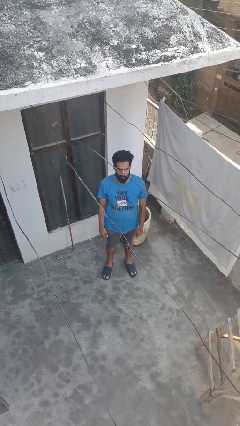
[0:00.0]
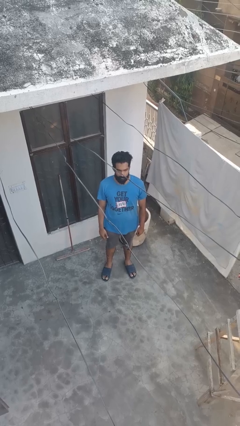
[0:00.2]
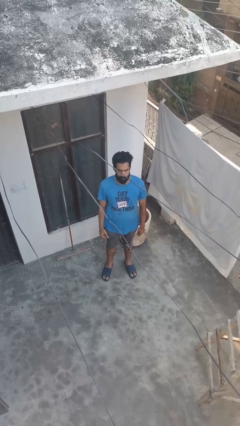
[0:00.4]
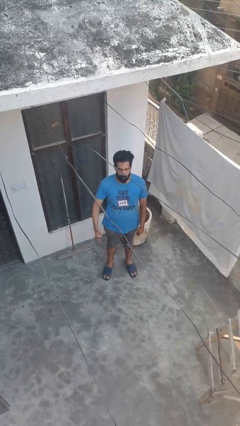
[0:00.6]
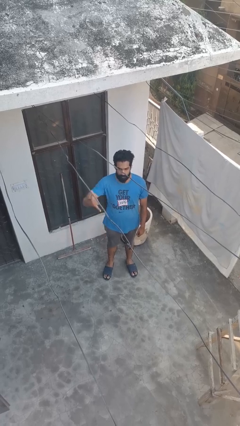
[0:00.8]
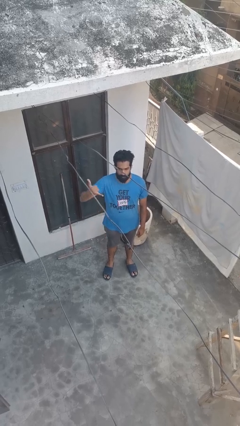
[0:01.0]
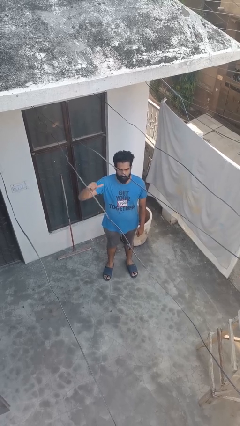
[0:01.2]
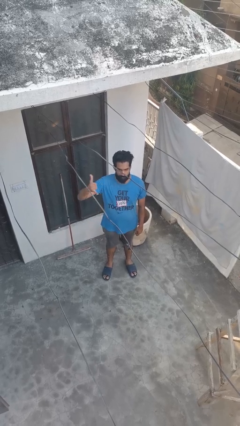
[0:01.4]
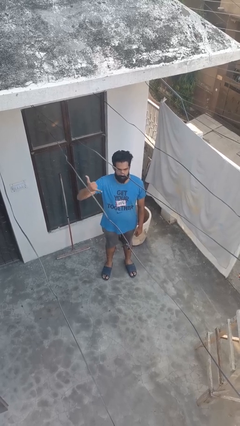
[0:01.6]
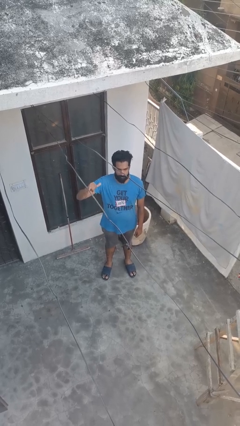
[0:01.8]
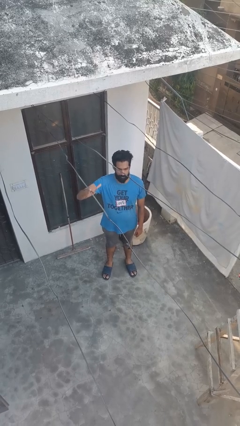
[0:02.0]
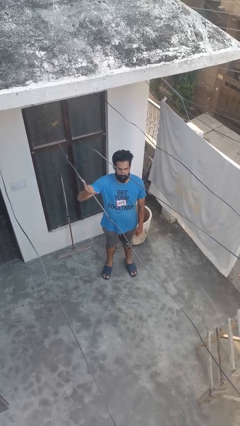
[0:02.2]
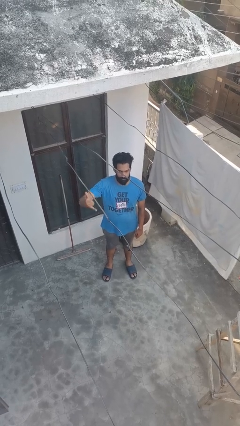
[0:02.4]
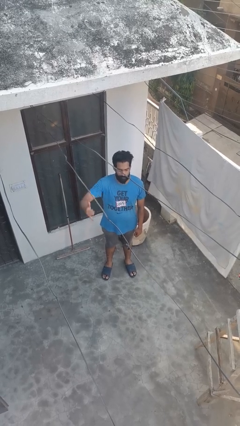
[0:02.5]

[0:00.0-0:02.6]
person gestures hang loose

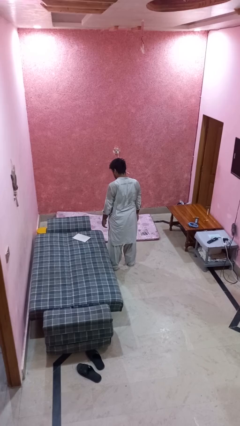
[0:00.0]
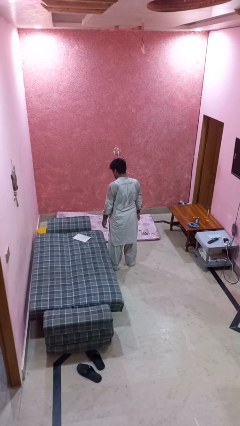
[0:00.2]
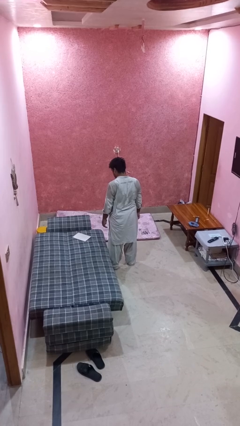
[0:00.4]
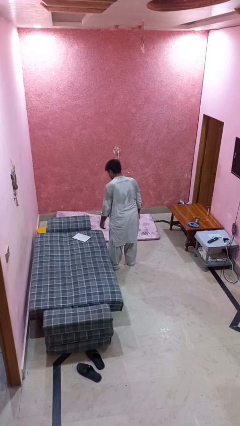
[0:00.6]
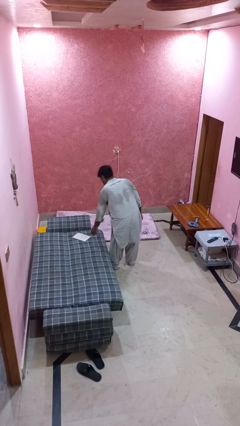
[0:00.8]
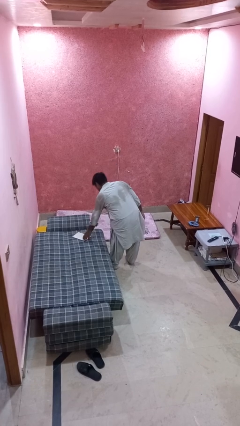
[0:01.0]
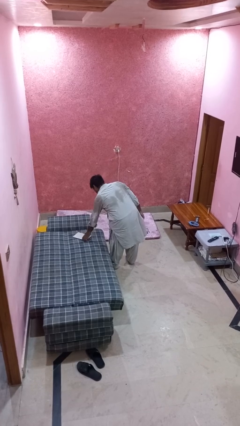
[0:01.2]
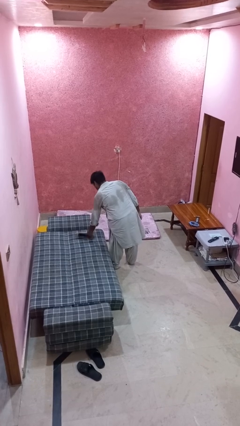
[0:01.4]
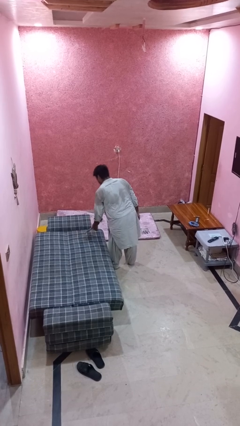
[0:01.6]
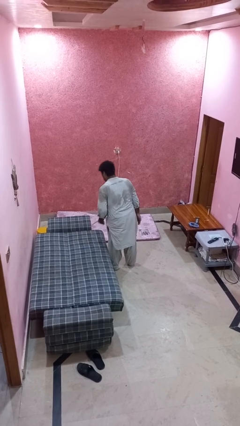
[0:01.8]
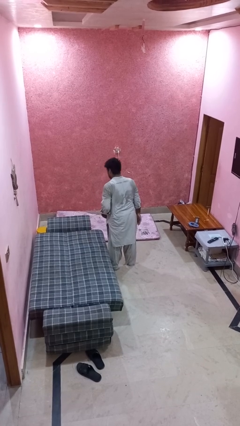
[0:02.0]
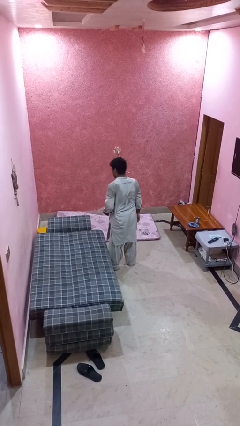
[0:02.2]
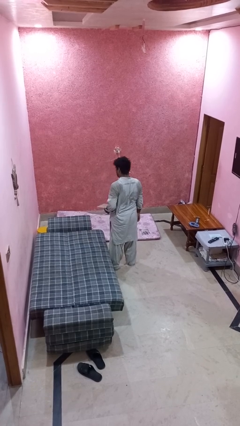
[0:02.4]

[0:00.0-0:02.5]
person picks up object from bed

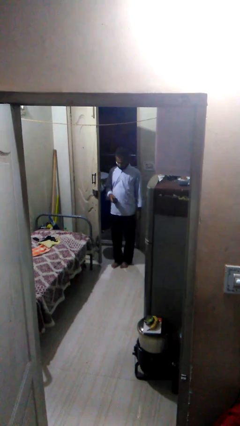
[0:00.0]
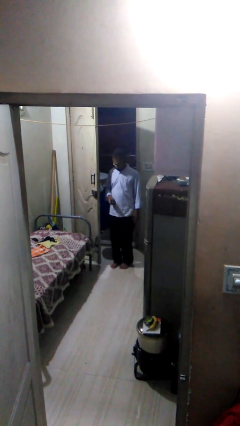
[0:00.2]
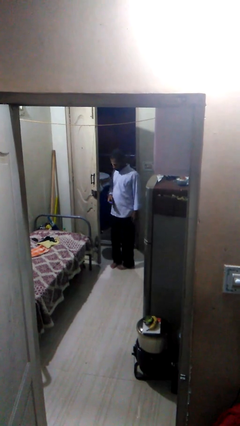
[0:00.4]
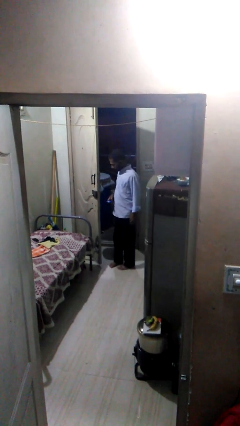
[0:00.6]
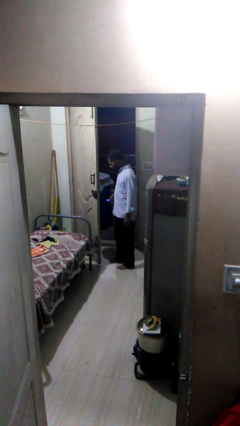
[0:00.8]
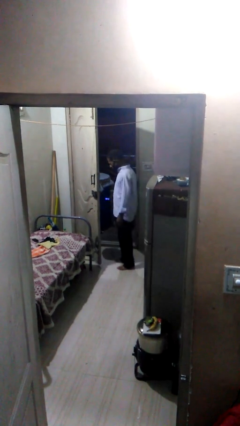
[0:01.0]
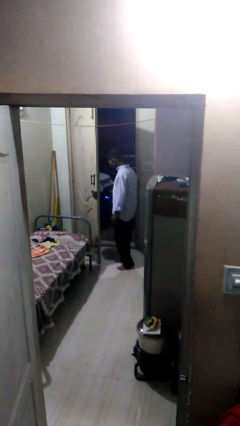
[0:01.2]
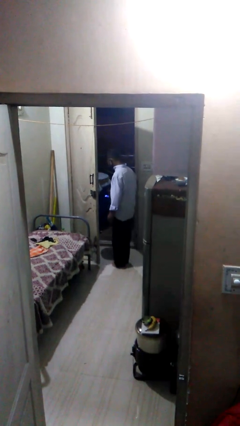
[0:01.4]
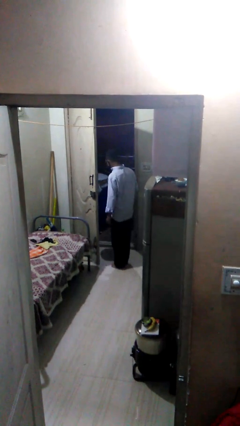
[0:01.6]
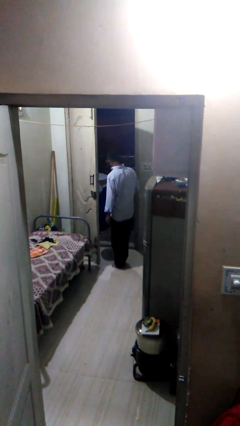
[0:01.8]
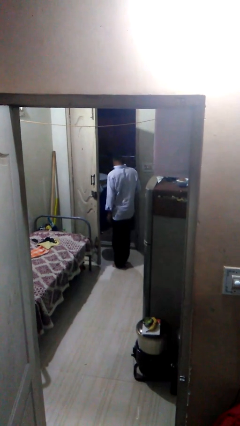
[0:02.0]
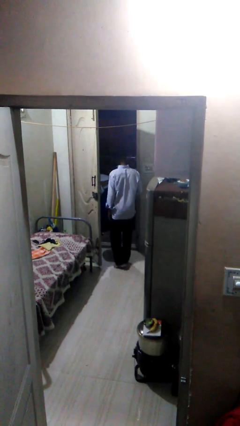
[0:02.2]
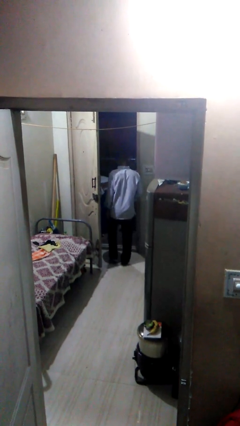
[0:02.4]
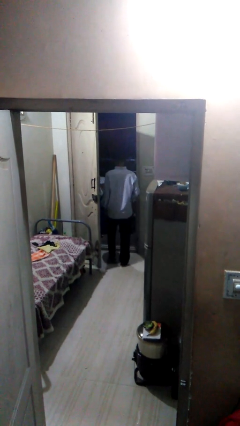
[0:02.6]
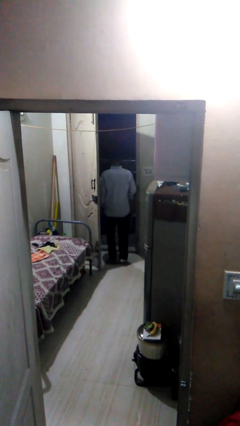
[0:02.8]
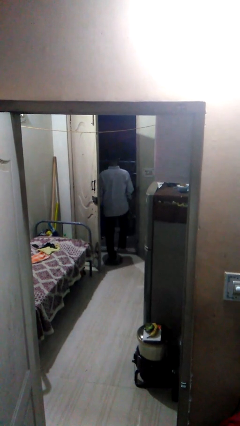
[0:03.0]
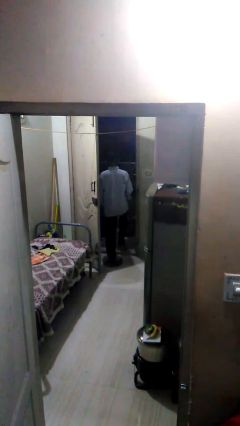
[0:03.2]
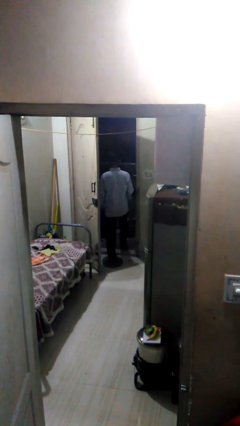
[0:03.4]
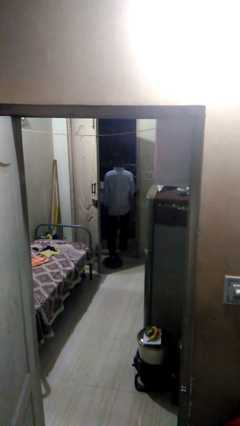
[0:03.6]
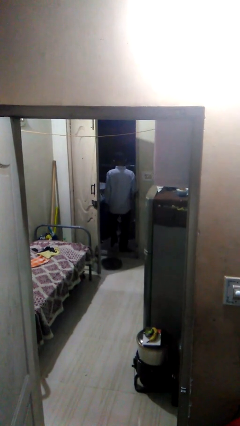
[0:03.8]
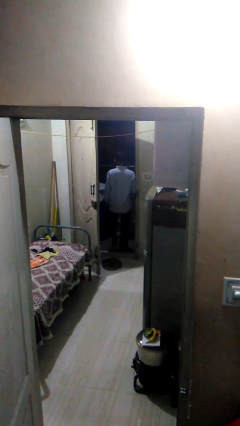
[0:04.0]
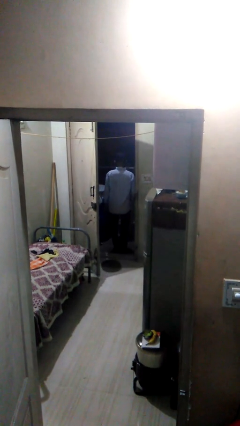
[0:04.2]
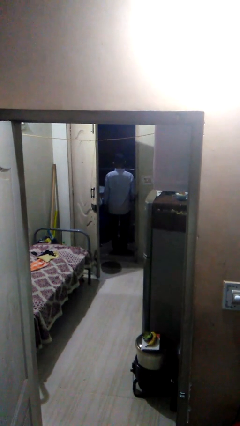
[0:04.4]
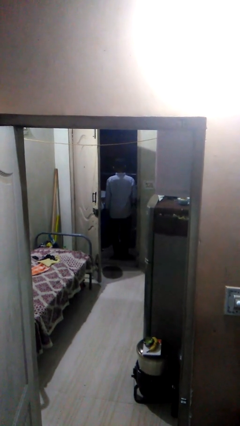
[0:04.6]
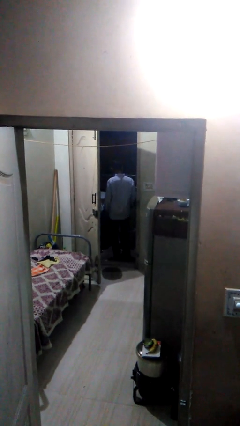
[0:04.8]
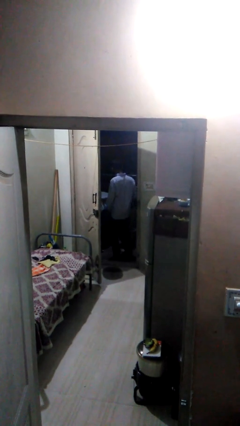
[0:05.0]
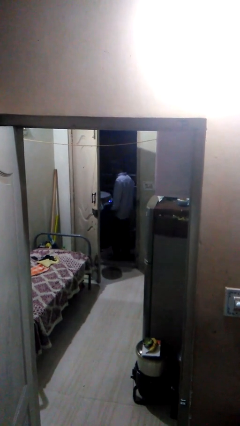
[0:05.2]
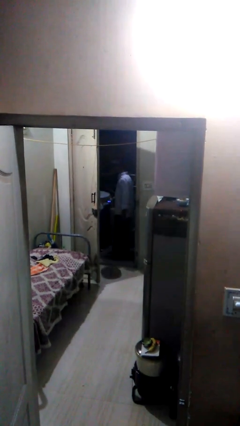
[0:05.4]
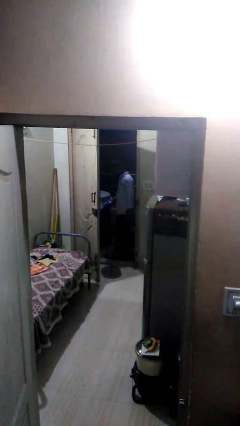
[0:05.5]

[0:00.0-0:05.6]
person exits scene through structure

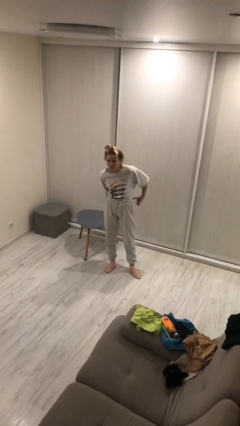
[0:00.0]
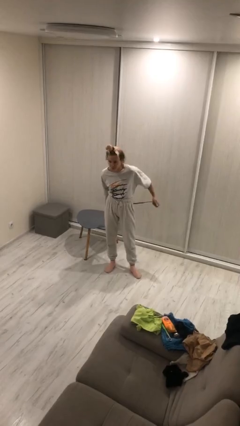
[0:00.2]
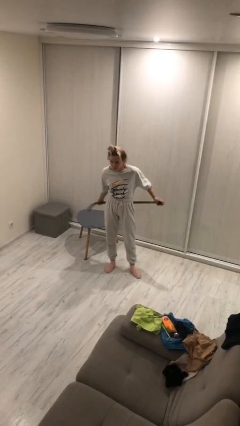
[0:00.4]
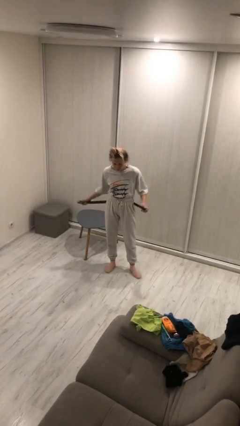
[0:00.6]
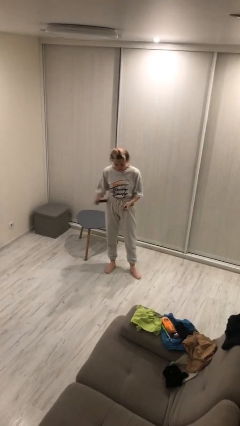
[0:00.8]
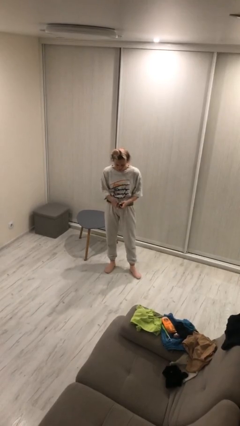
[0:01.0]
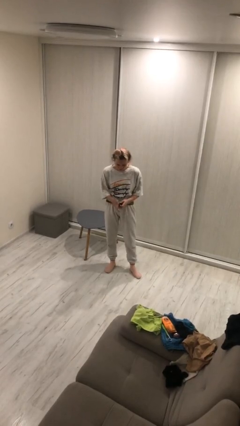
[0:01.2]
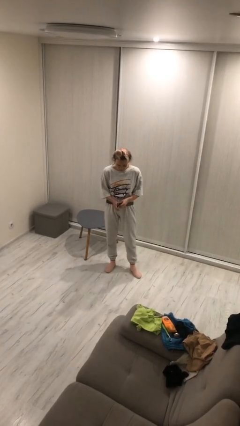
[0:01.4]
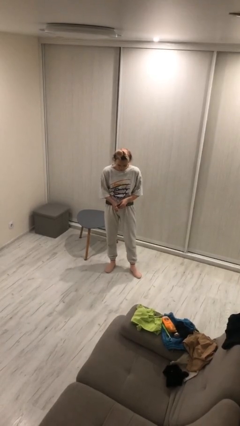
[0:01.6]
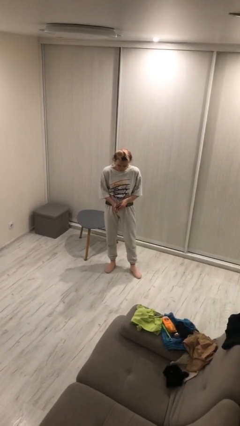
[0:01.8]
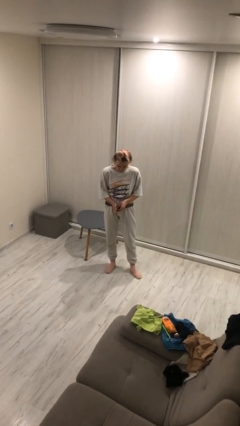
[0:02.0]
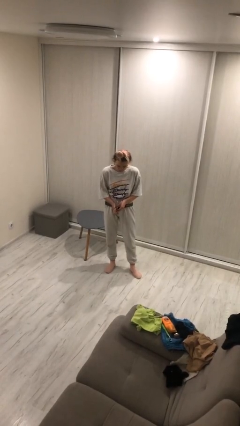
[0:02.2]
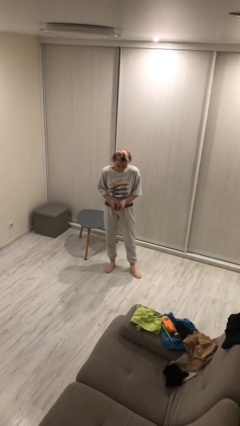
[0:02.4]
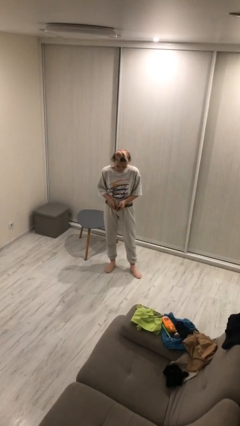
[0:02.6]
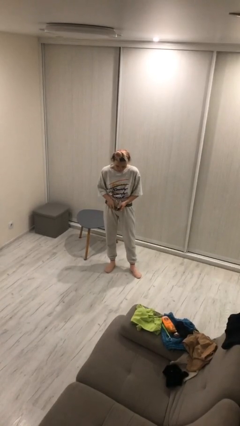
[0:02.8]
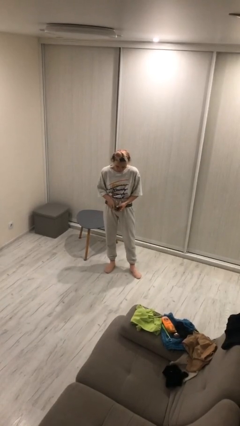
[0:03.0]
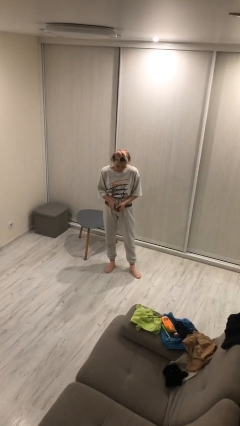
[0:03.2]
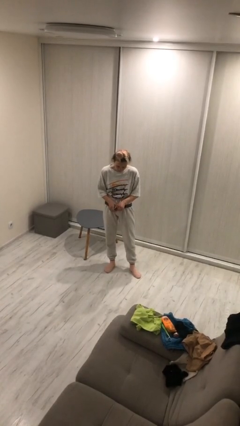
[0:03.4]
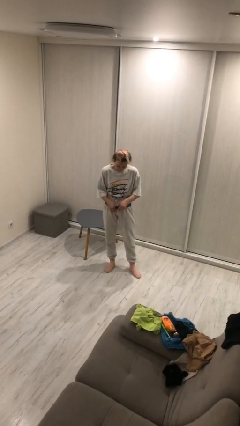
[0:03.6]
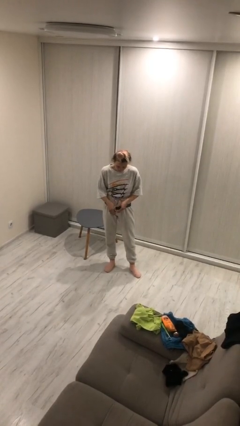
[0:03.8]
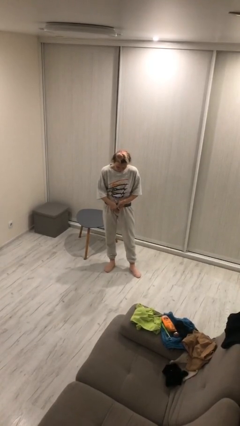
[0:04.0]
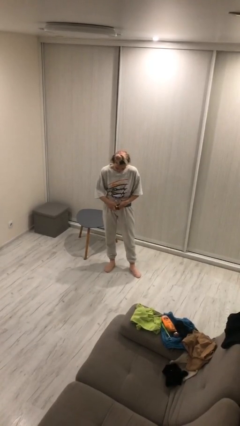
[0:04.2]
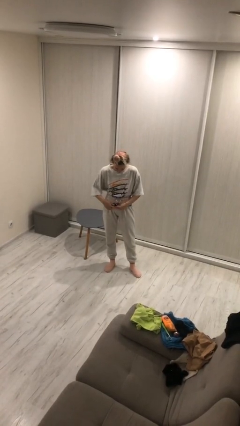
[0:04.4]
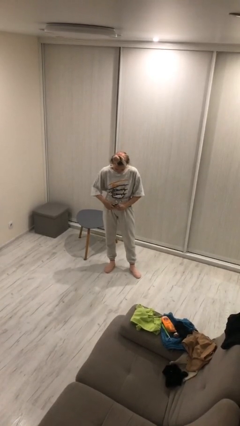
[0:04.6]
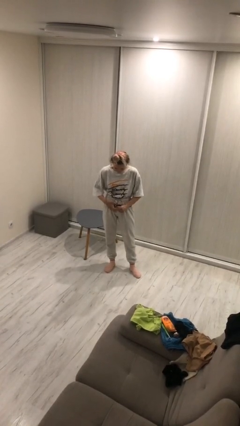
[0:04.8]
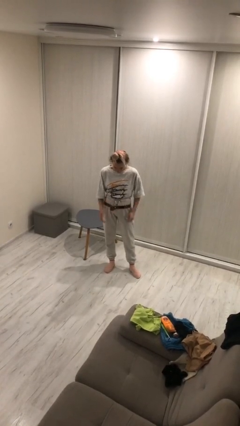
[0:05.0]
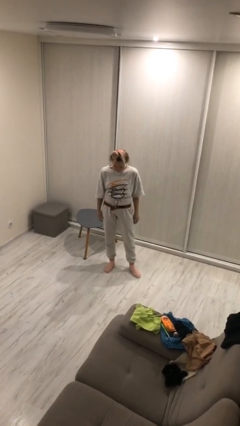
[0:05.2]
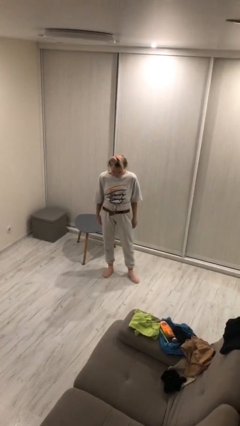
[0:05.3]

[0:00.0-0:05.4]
person puts on belt

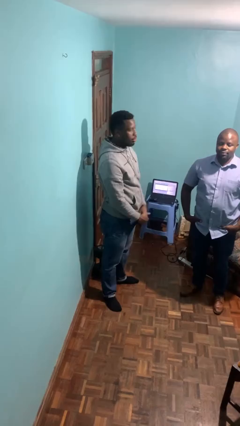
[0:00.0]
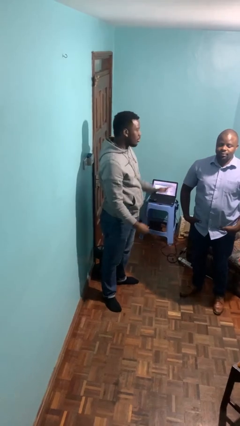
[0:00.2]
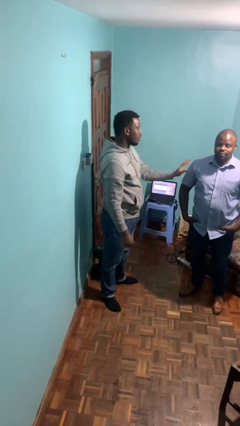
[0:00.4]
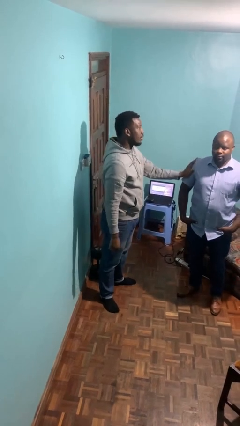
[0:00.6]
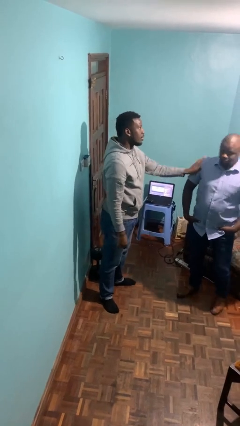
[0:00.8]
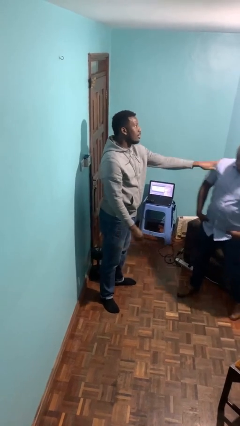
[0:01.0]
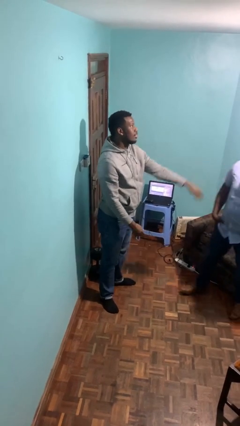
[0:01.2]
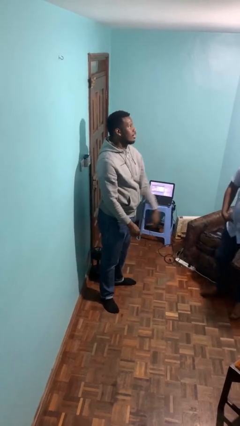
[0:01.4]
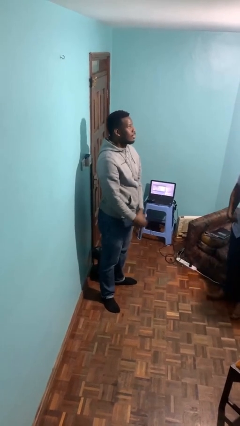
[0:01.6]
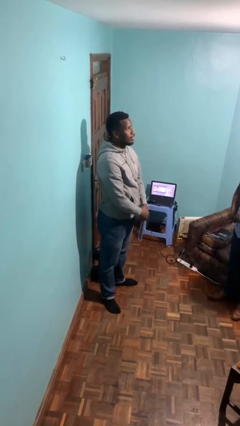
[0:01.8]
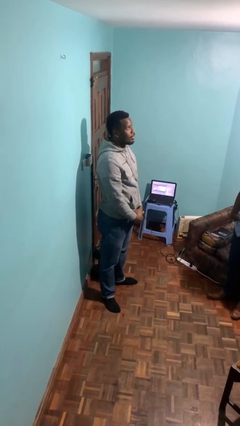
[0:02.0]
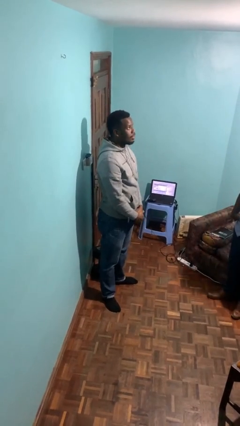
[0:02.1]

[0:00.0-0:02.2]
person shoves person
